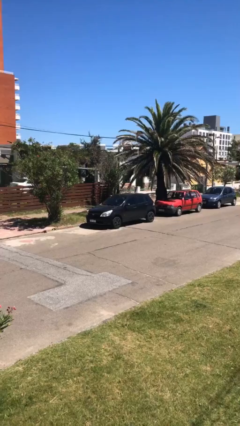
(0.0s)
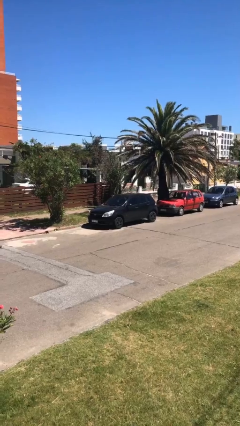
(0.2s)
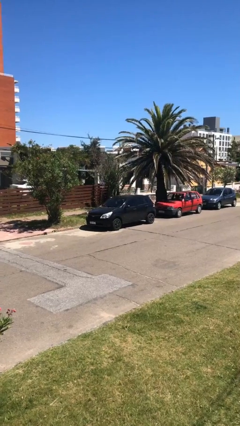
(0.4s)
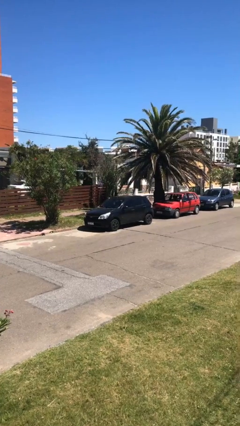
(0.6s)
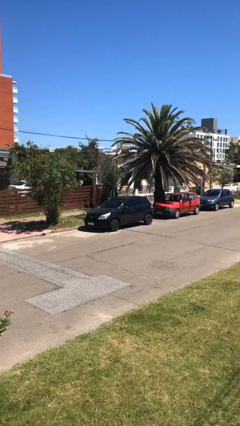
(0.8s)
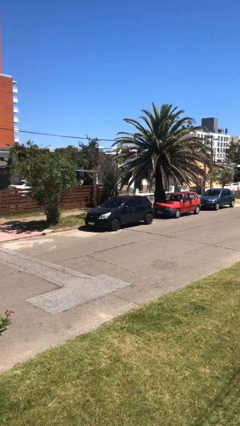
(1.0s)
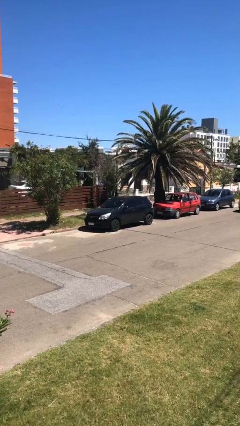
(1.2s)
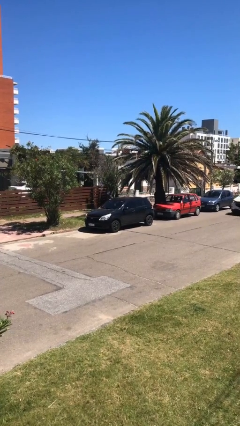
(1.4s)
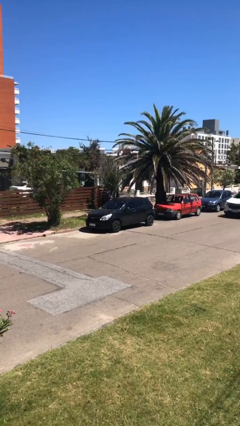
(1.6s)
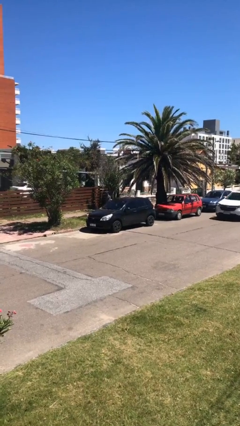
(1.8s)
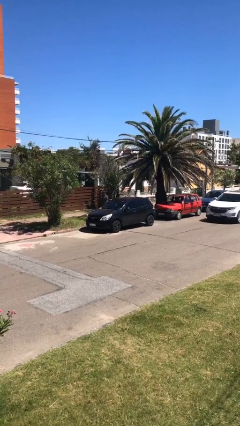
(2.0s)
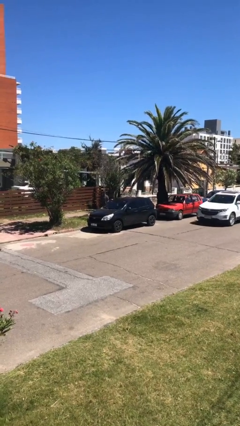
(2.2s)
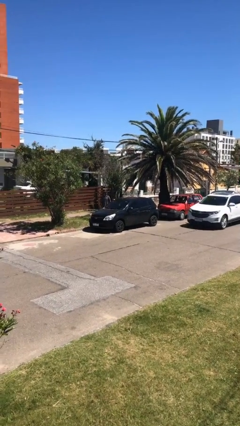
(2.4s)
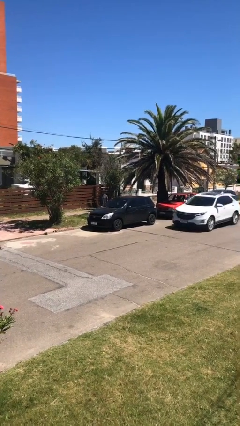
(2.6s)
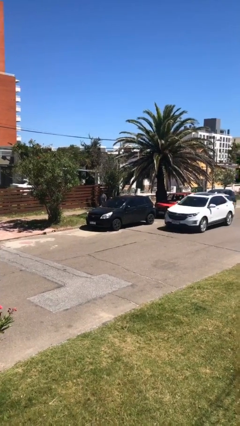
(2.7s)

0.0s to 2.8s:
car drops off person

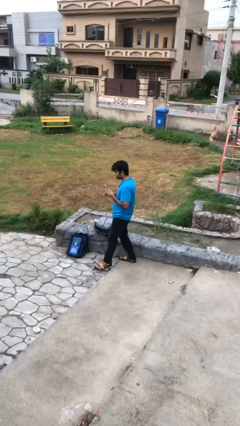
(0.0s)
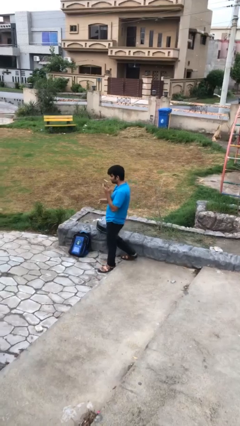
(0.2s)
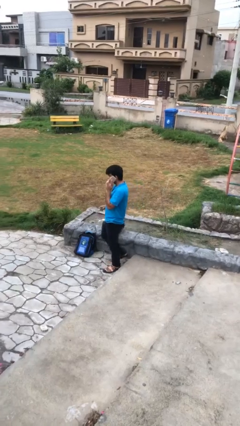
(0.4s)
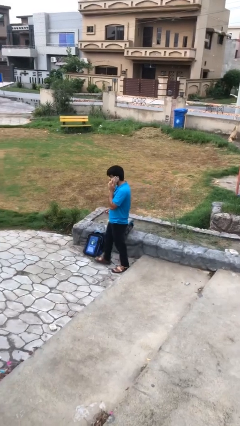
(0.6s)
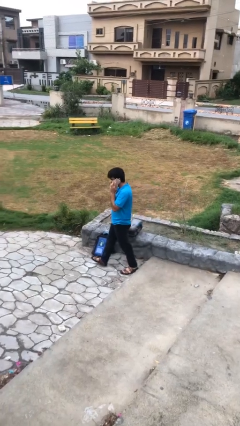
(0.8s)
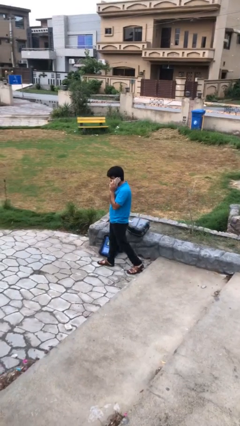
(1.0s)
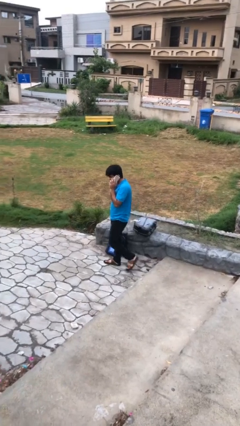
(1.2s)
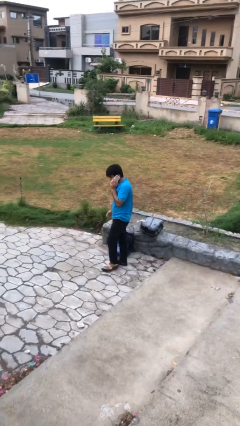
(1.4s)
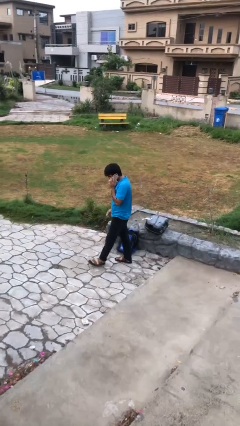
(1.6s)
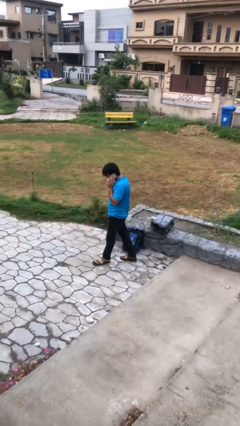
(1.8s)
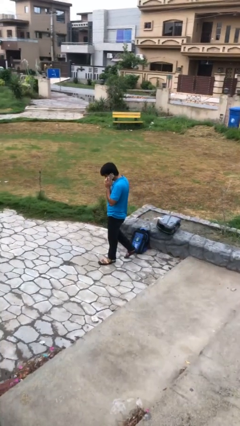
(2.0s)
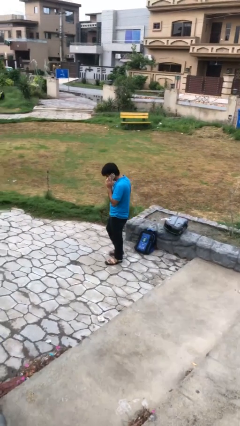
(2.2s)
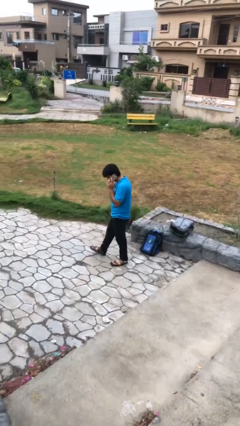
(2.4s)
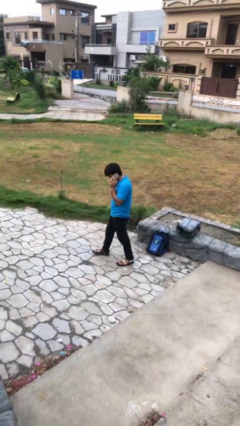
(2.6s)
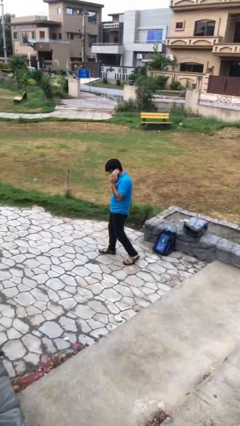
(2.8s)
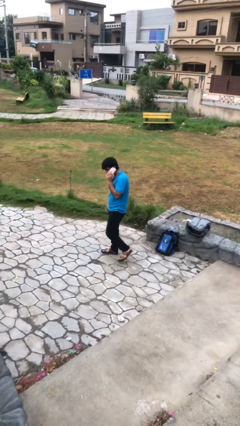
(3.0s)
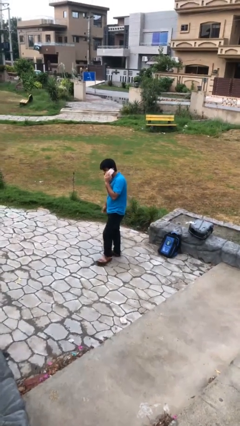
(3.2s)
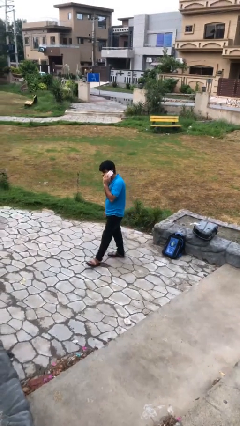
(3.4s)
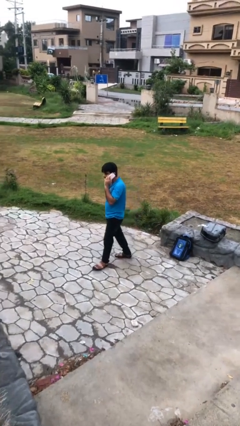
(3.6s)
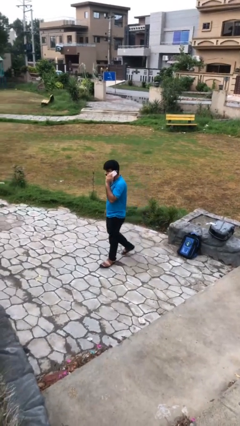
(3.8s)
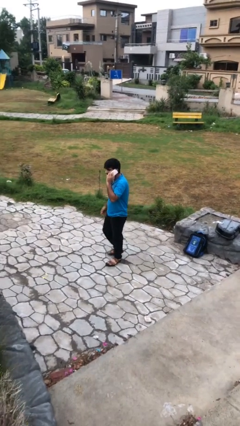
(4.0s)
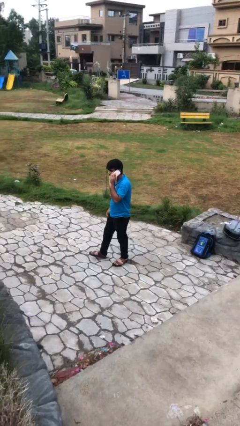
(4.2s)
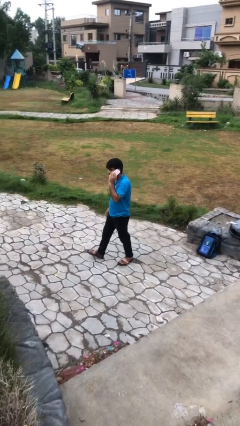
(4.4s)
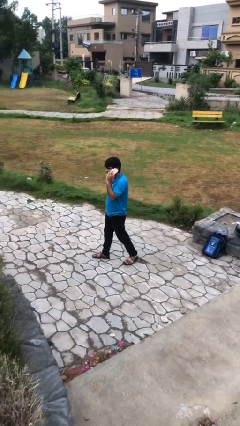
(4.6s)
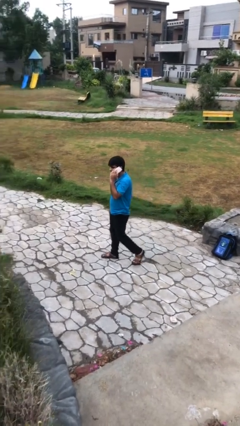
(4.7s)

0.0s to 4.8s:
person talks on phone

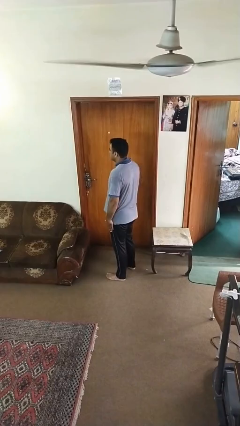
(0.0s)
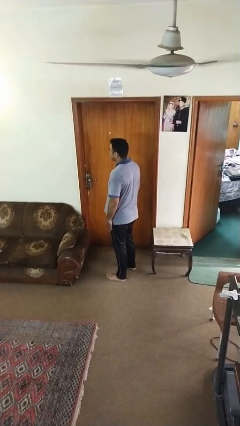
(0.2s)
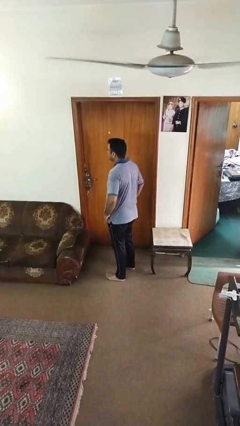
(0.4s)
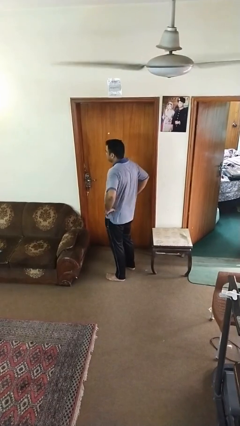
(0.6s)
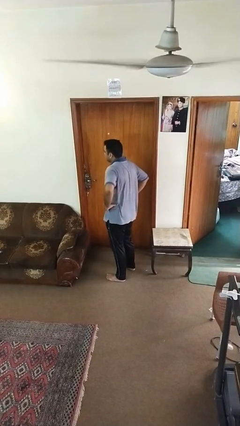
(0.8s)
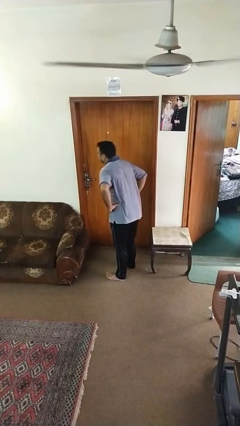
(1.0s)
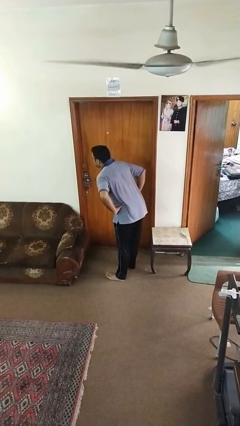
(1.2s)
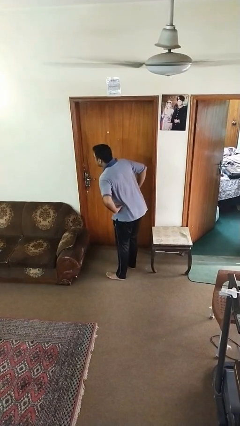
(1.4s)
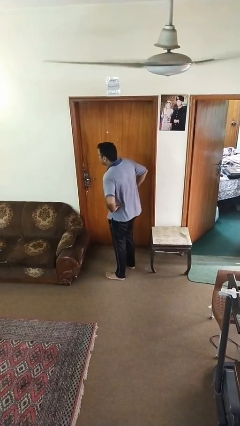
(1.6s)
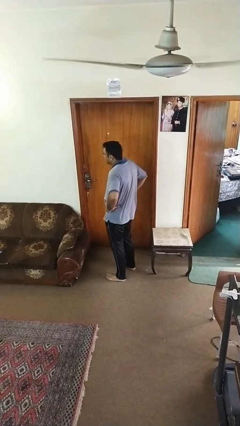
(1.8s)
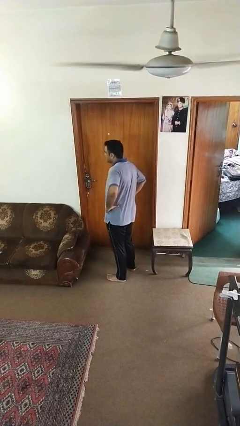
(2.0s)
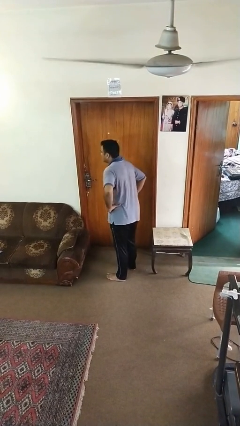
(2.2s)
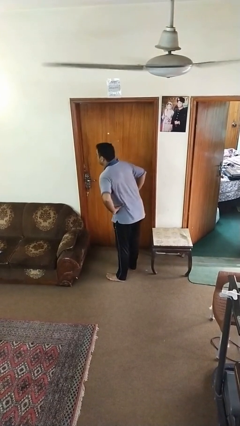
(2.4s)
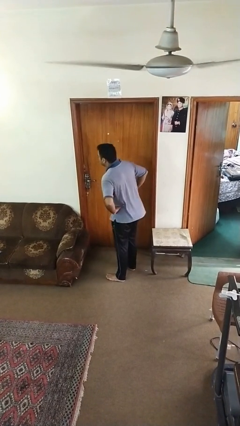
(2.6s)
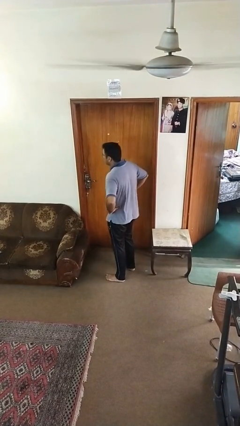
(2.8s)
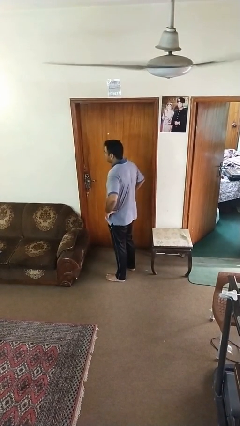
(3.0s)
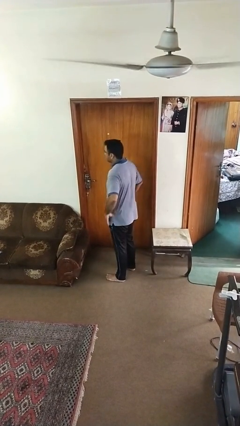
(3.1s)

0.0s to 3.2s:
person wiggles hips

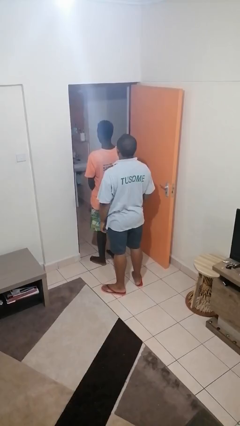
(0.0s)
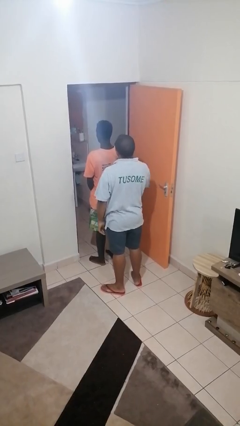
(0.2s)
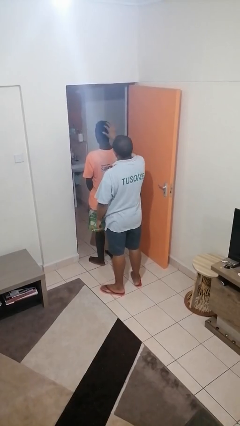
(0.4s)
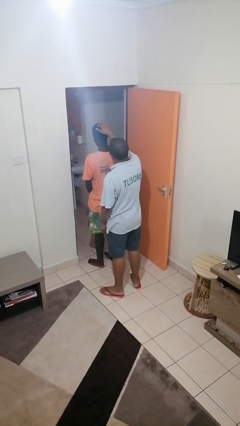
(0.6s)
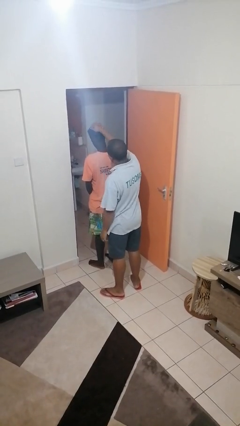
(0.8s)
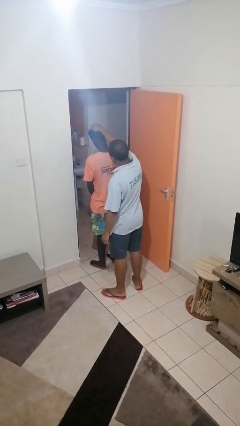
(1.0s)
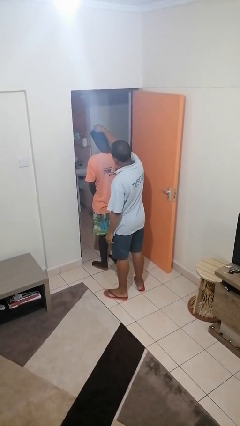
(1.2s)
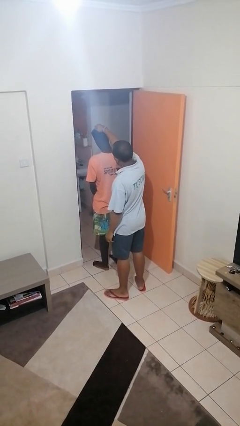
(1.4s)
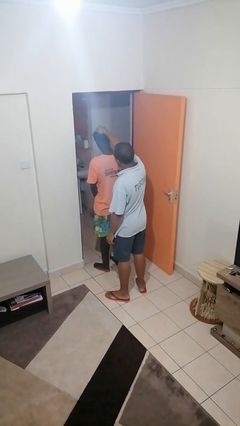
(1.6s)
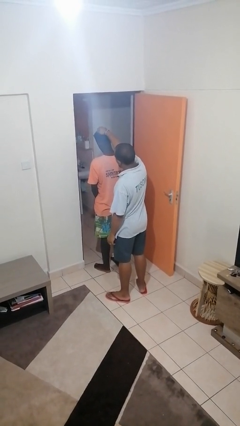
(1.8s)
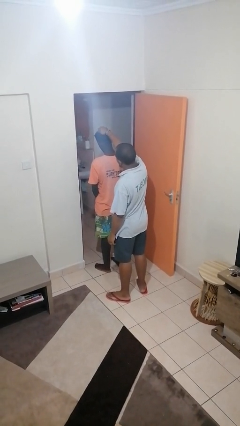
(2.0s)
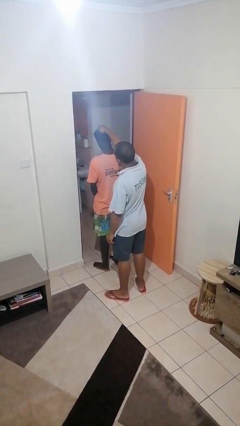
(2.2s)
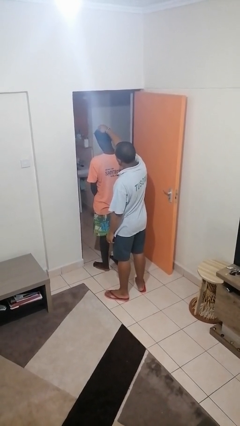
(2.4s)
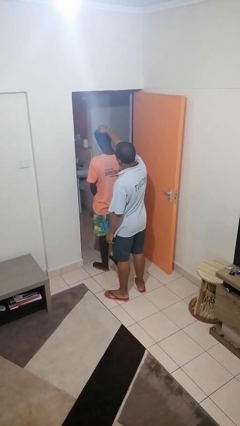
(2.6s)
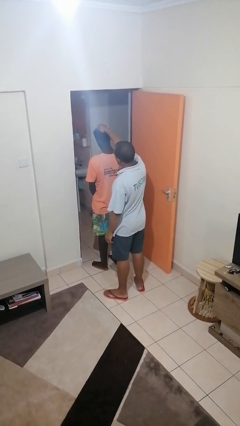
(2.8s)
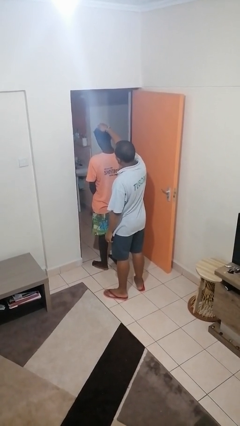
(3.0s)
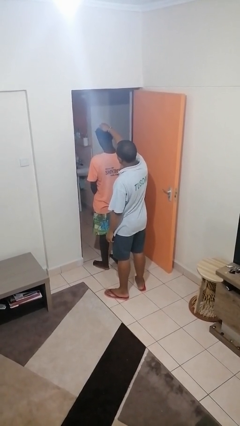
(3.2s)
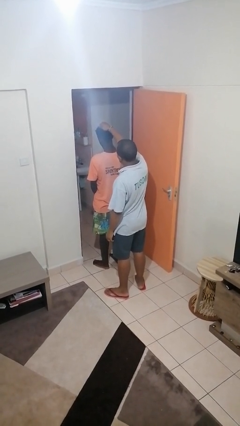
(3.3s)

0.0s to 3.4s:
person grabs person by hair

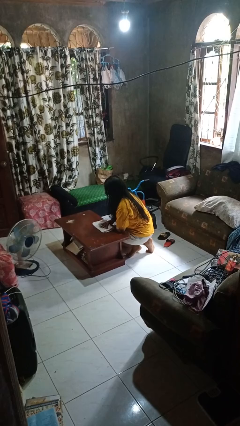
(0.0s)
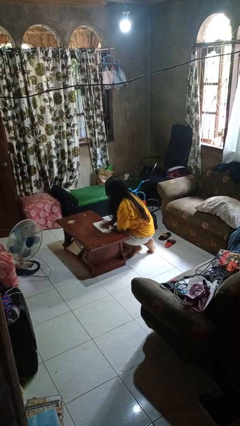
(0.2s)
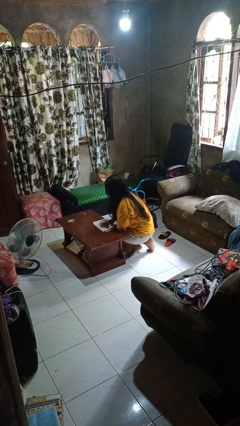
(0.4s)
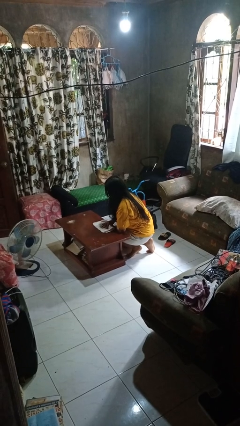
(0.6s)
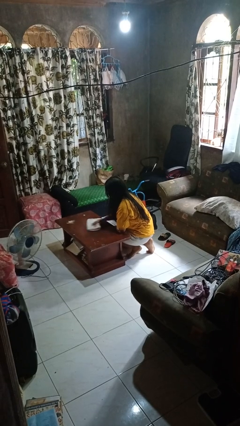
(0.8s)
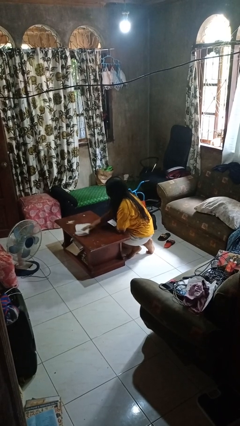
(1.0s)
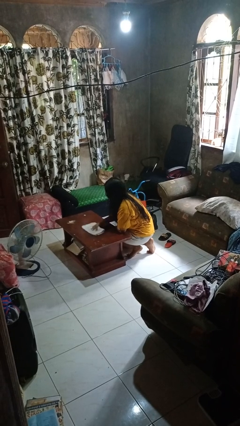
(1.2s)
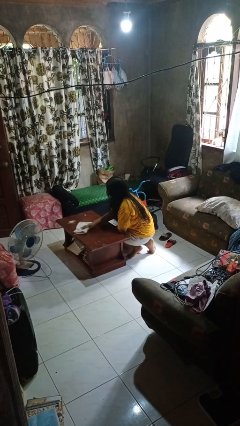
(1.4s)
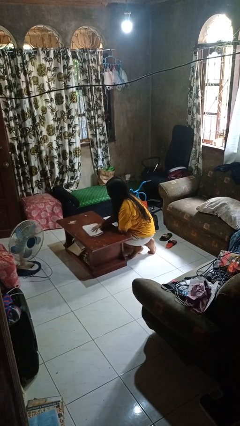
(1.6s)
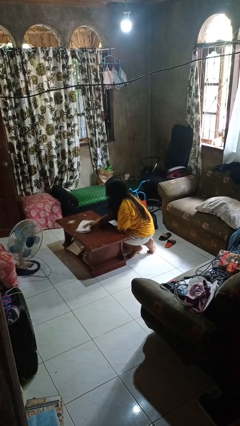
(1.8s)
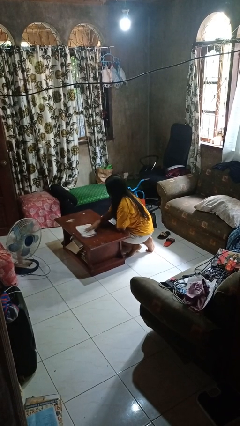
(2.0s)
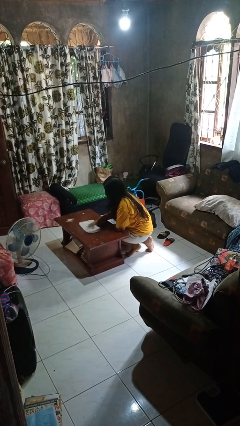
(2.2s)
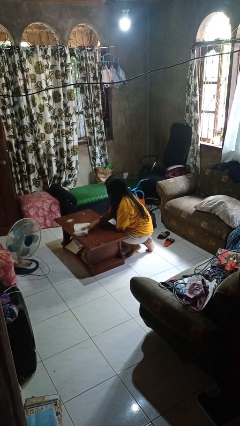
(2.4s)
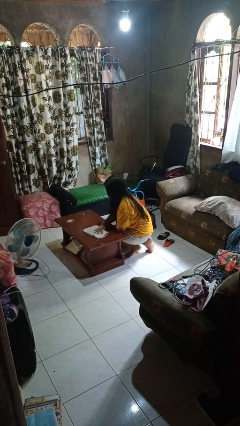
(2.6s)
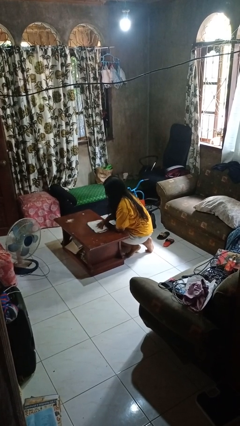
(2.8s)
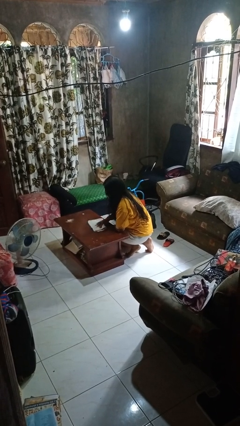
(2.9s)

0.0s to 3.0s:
person cleans table with rag

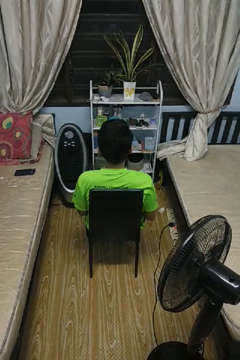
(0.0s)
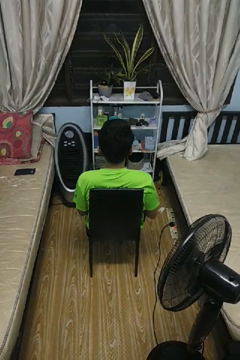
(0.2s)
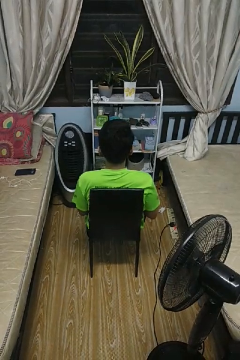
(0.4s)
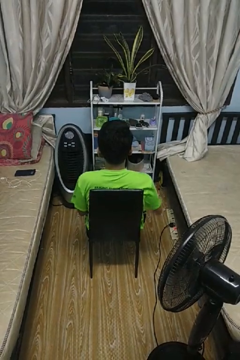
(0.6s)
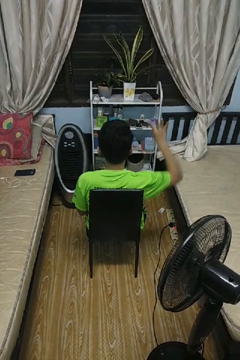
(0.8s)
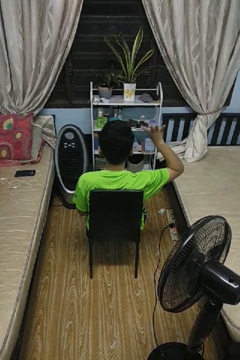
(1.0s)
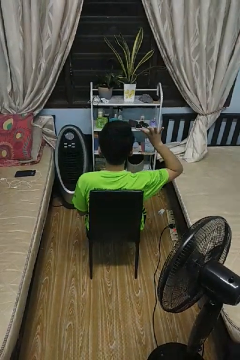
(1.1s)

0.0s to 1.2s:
person gestures number four
